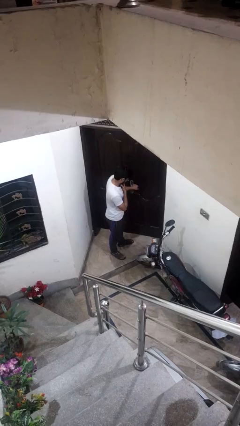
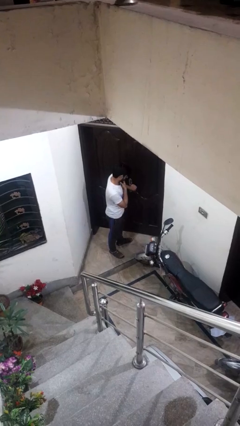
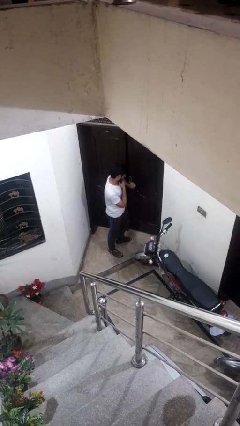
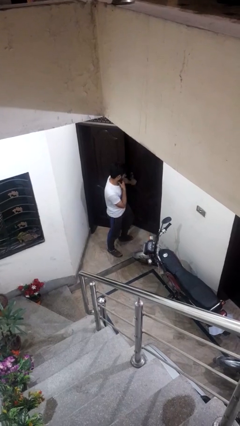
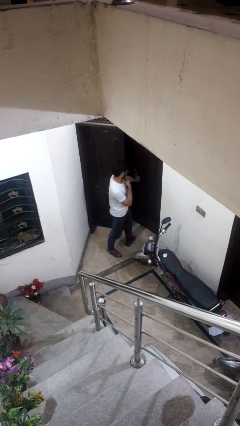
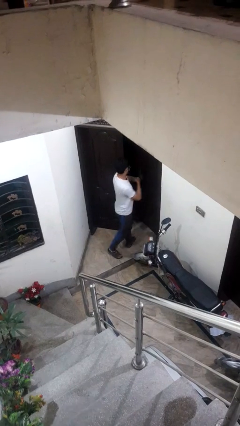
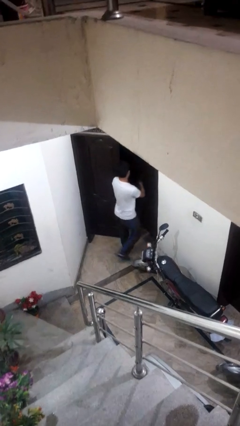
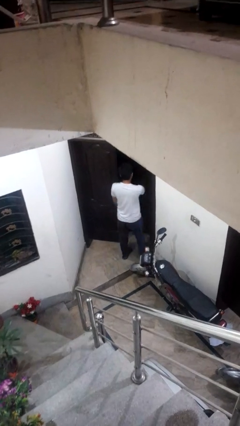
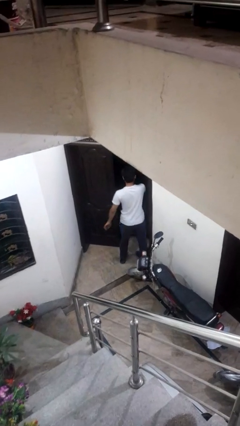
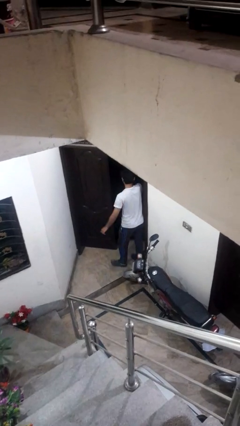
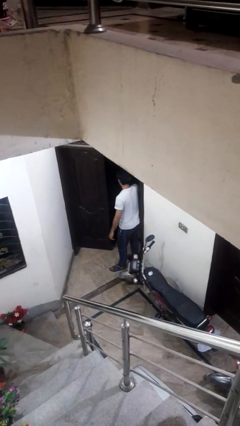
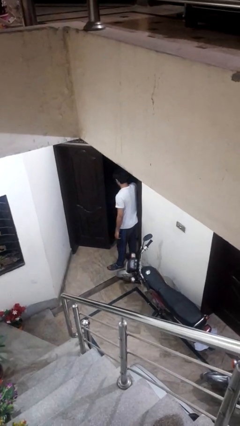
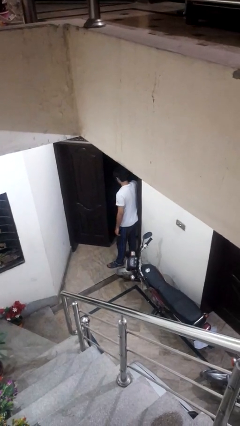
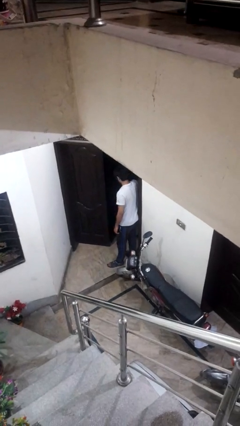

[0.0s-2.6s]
person opens facility door

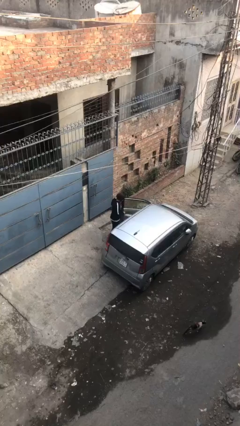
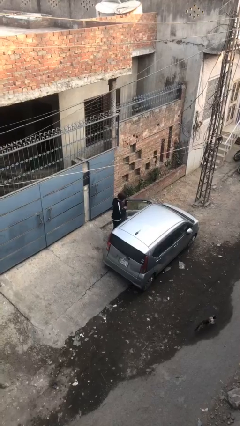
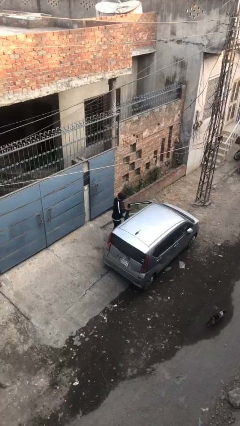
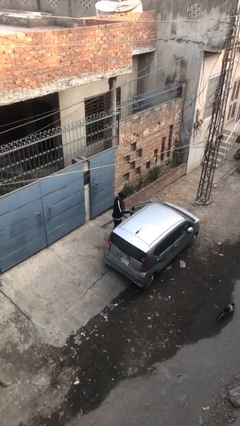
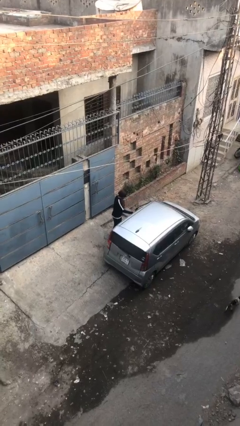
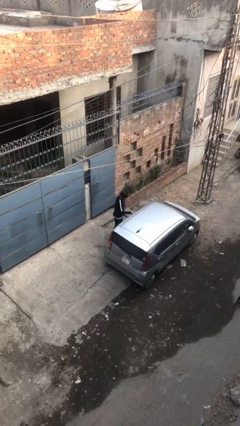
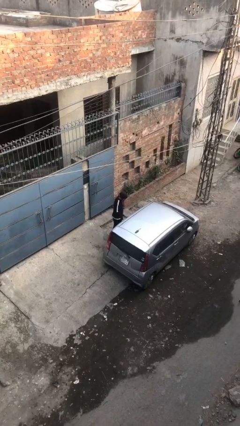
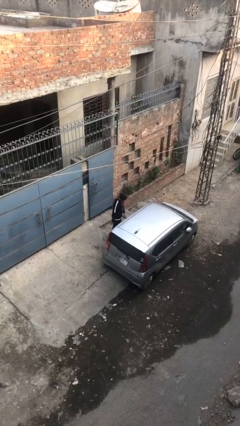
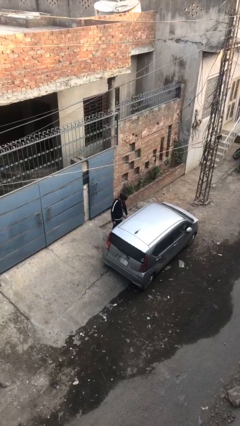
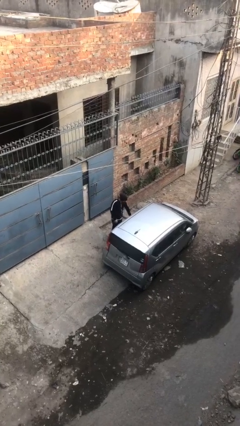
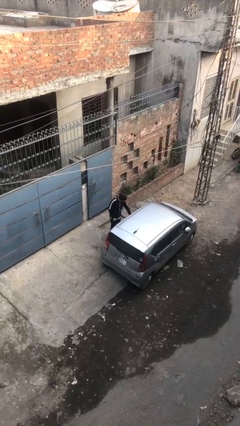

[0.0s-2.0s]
person closes car door

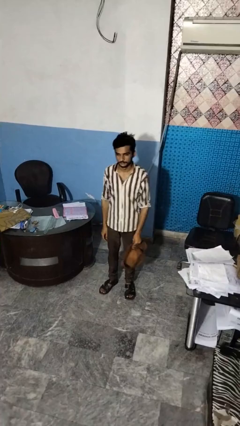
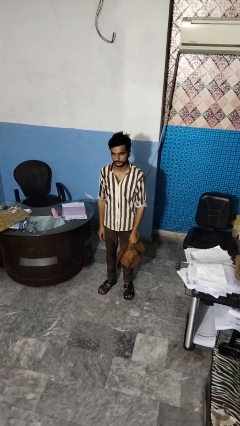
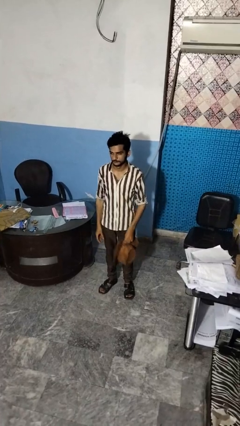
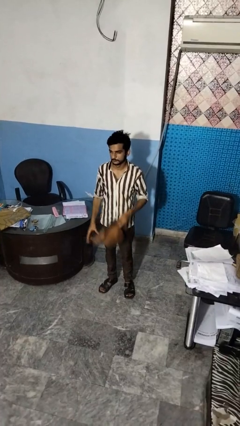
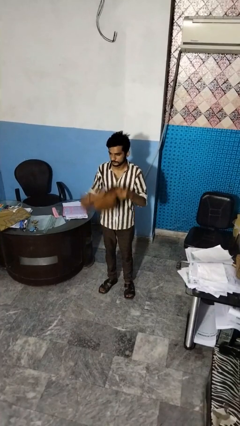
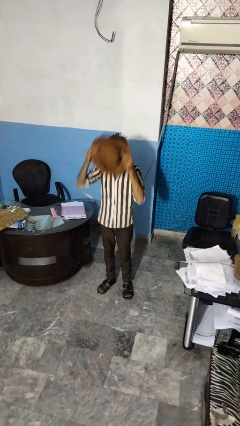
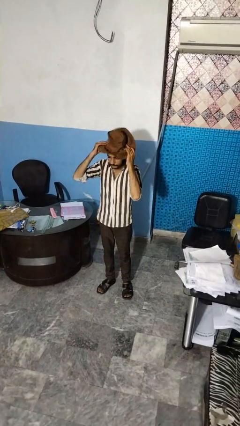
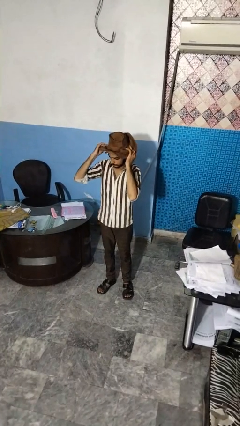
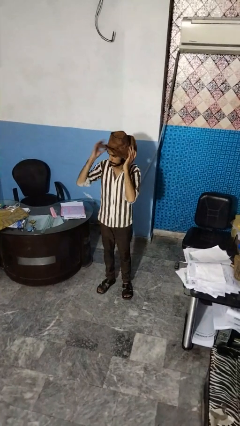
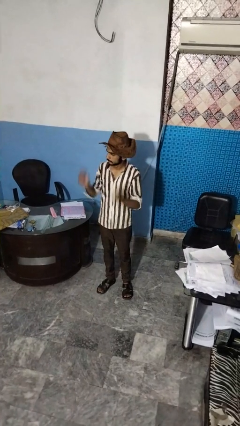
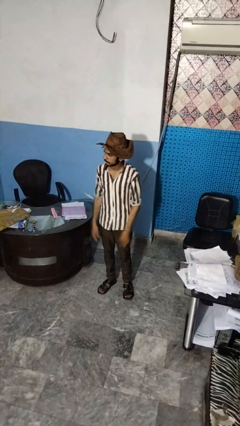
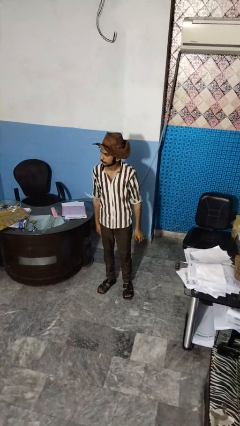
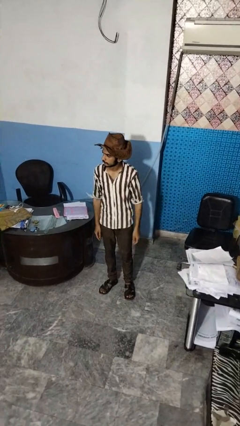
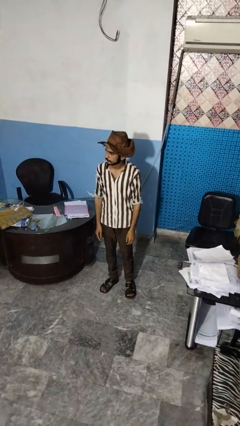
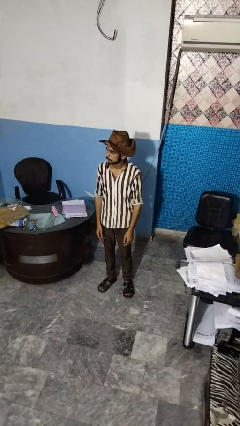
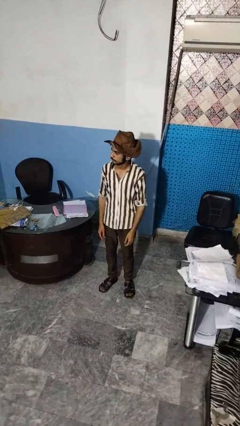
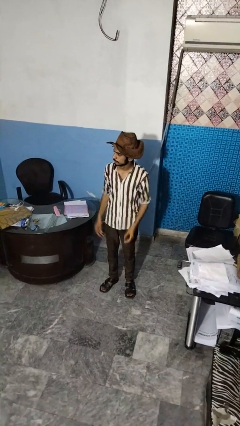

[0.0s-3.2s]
person puts on hat

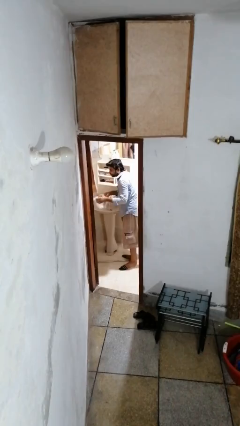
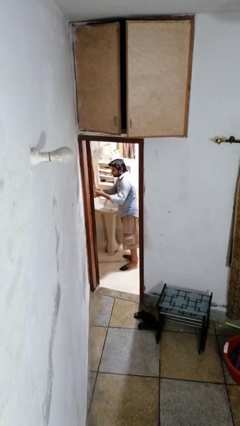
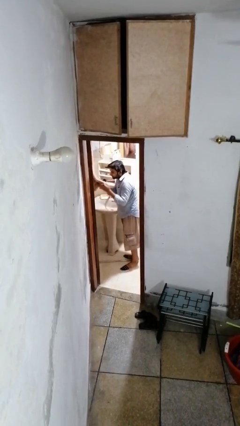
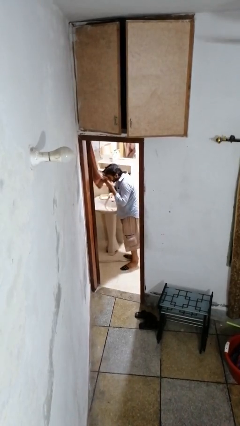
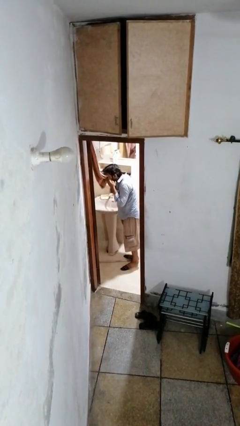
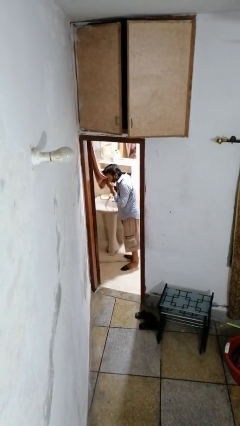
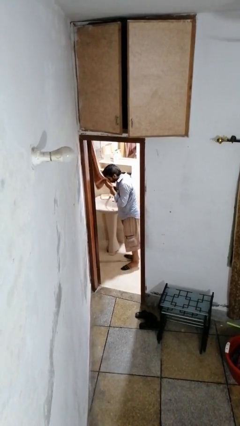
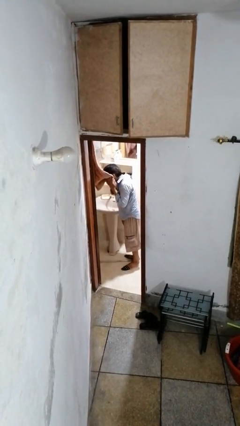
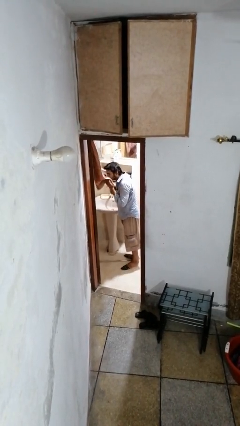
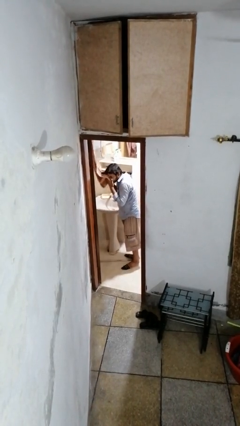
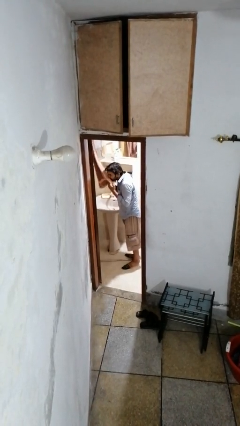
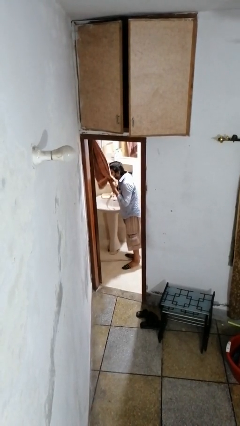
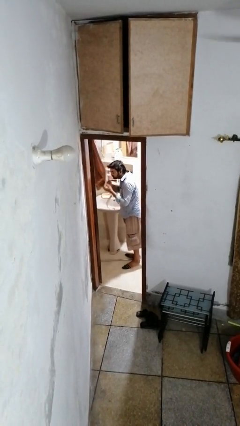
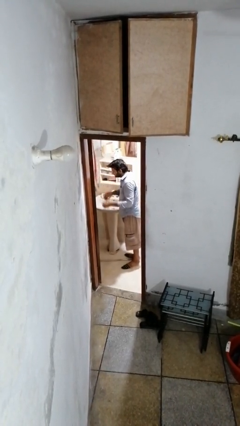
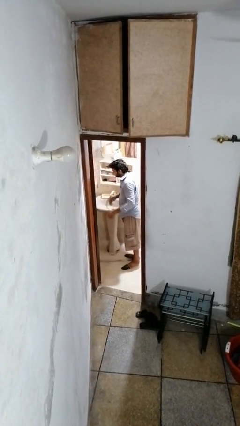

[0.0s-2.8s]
person dries face with towel

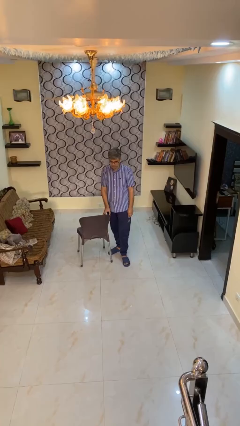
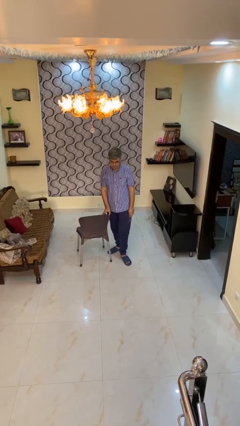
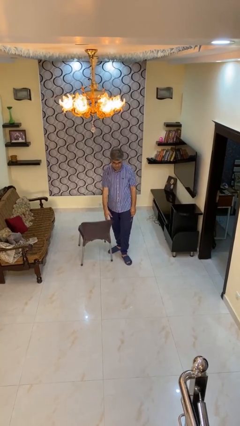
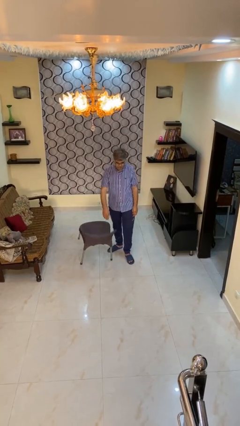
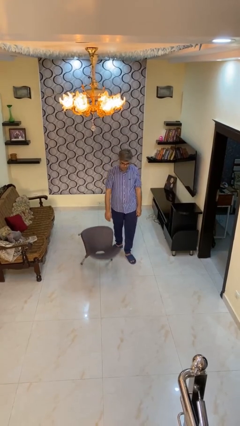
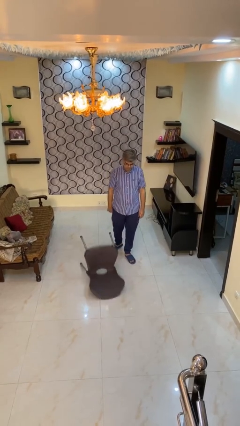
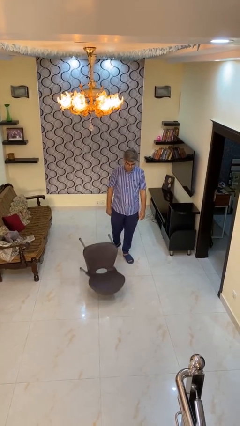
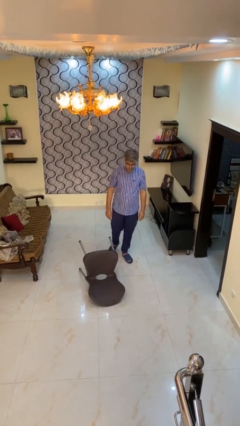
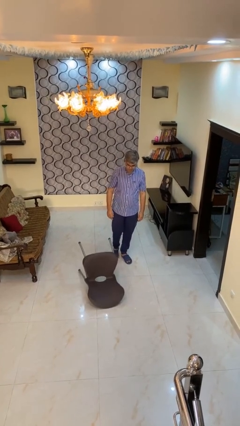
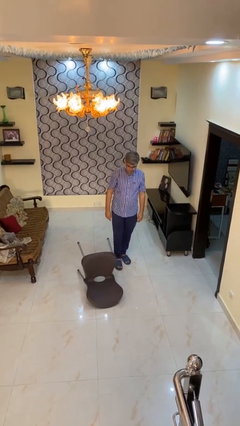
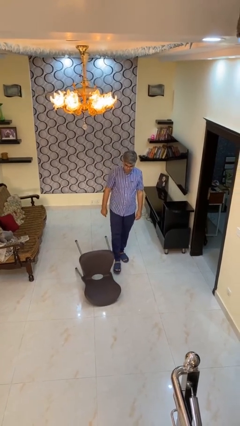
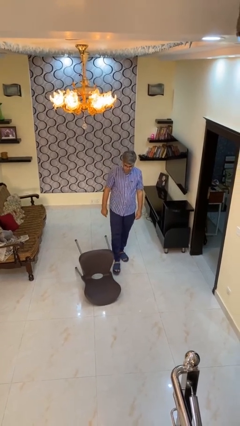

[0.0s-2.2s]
person knocks over furniture

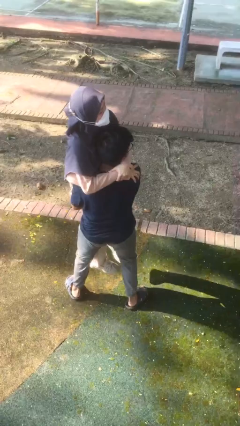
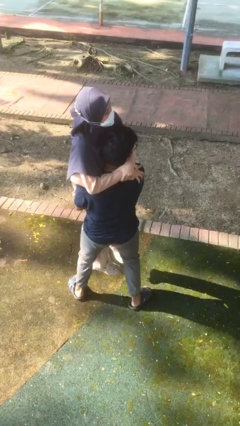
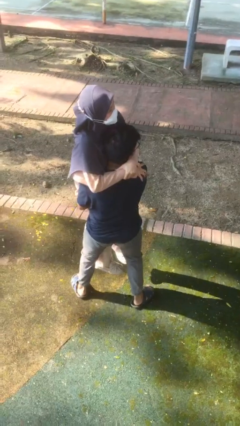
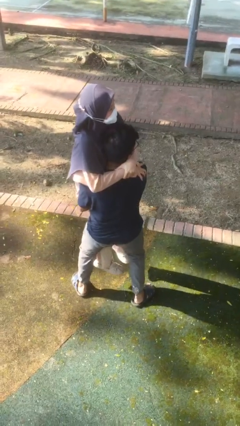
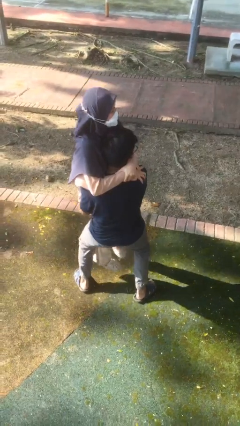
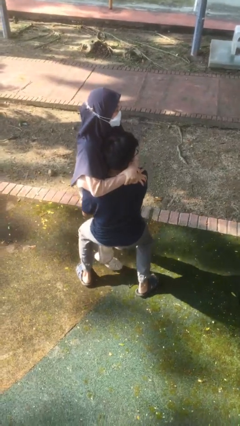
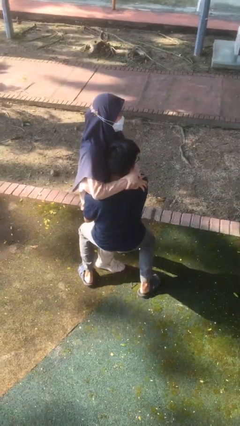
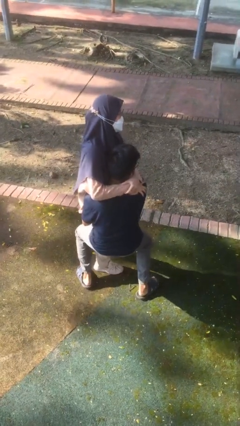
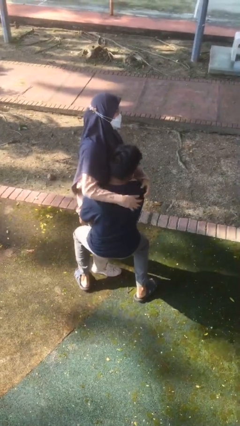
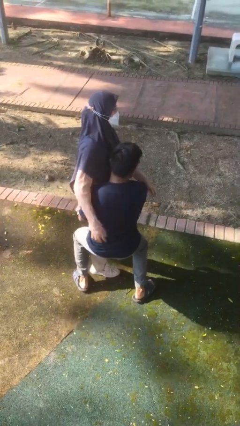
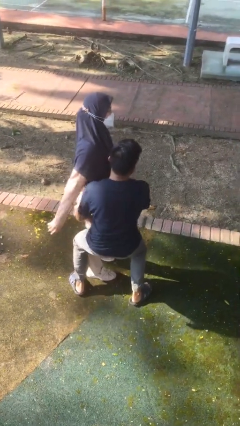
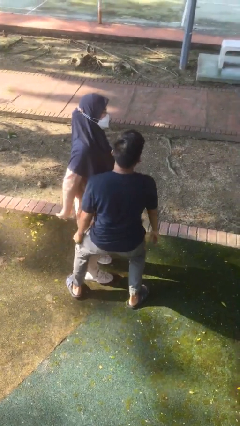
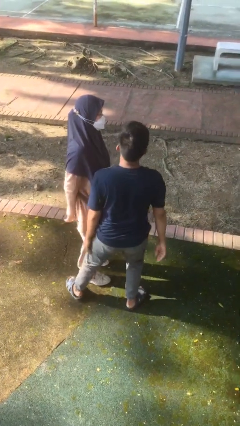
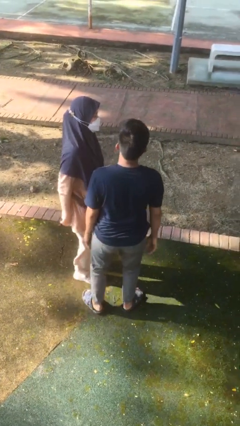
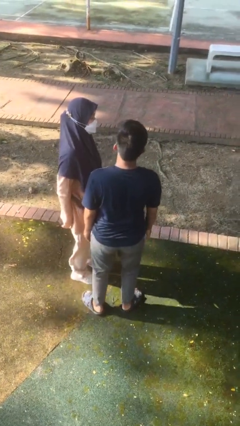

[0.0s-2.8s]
person puts down person

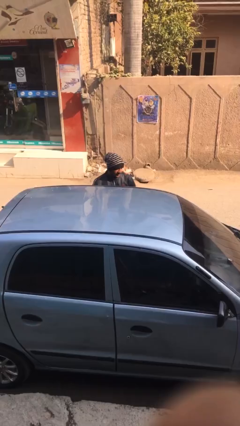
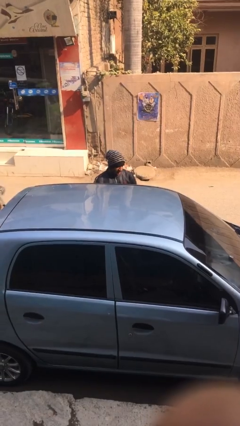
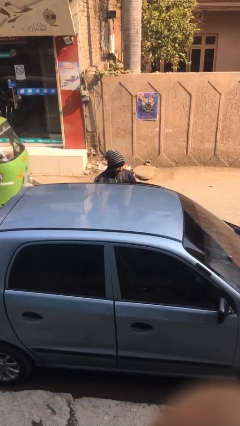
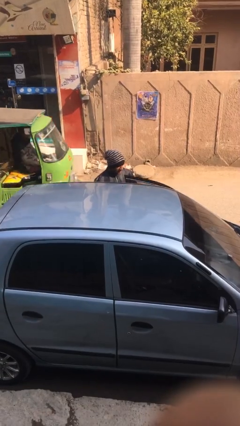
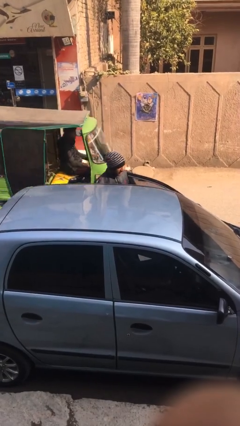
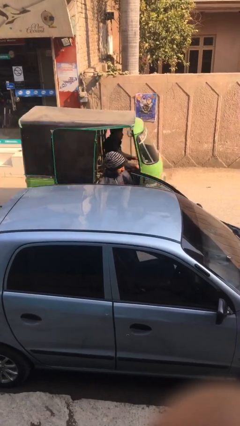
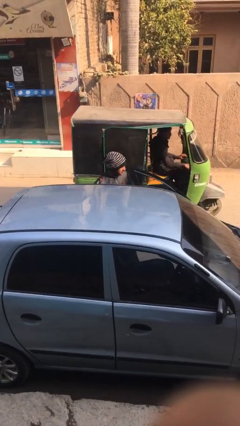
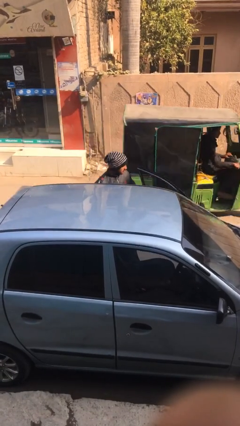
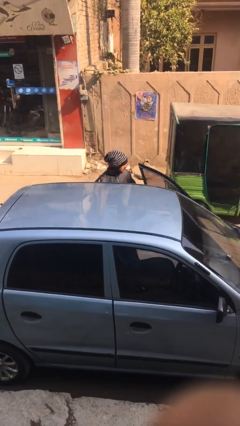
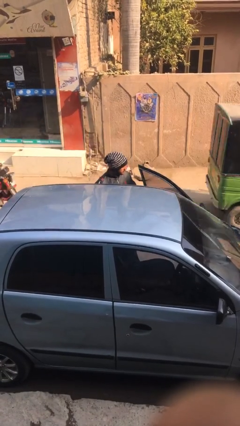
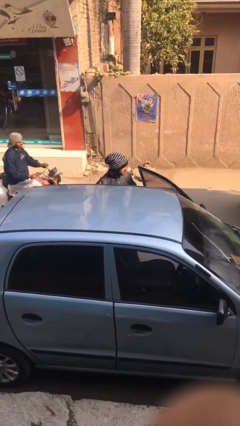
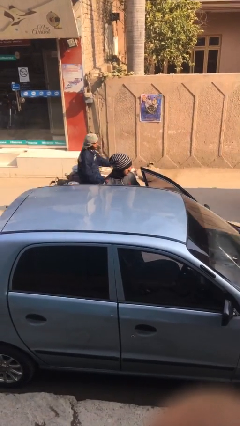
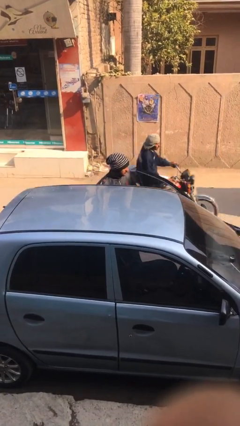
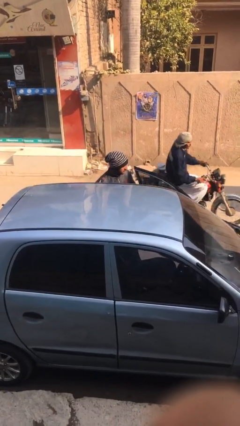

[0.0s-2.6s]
person opens car door
